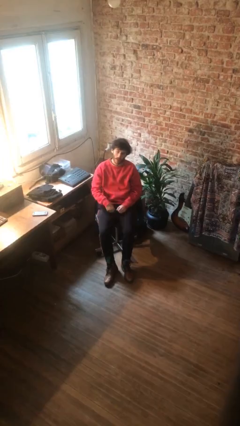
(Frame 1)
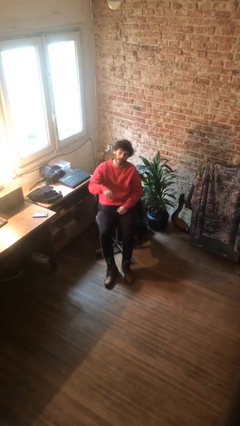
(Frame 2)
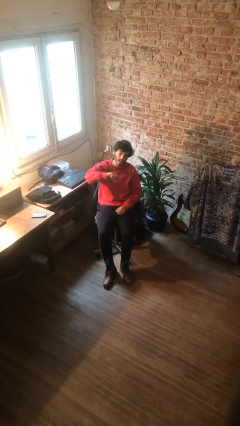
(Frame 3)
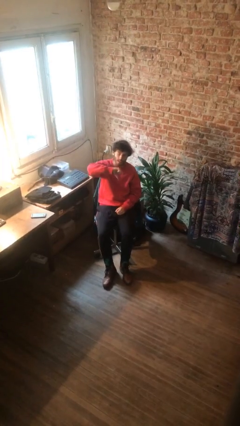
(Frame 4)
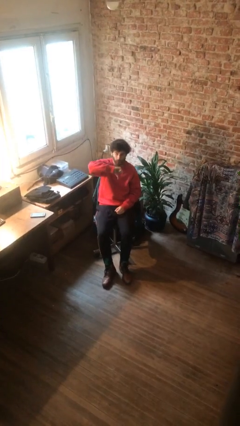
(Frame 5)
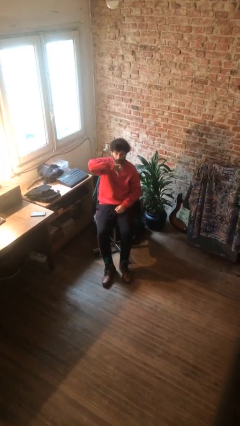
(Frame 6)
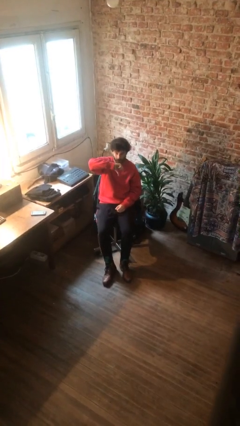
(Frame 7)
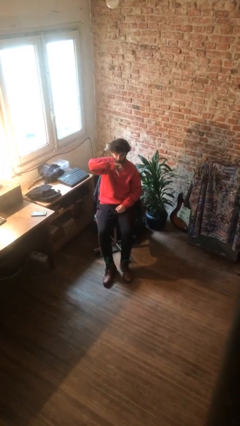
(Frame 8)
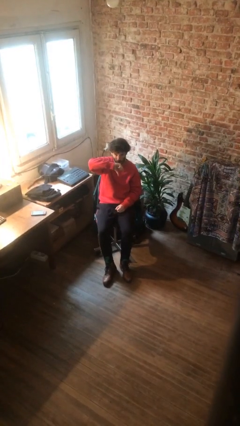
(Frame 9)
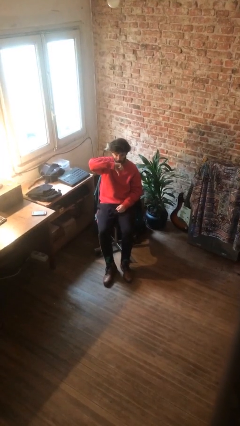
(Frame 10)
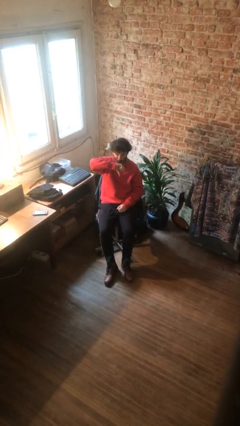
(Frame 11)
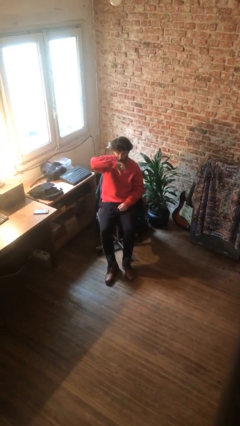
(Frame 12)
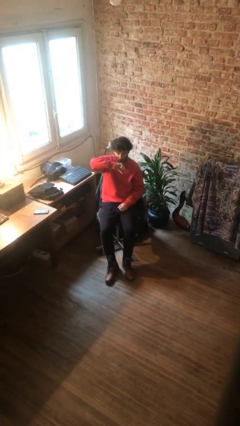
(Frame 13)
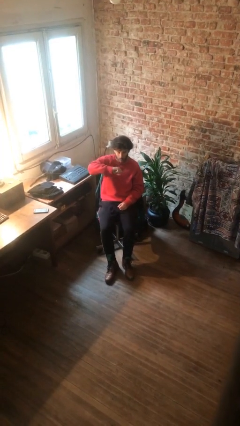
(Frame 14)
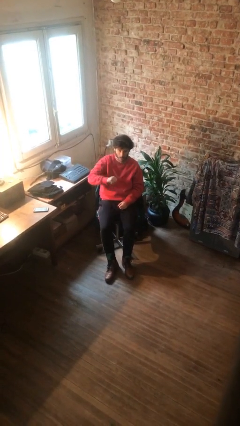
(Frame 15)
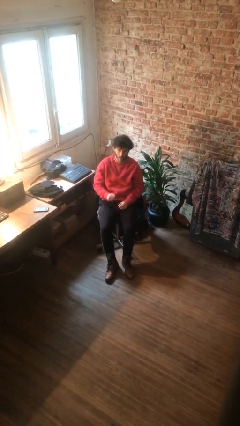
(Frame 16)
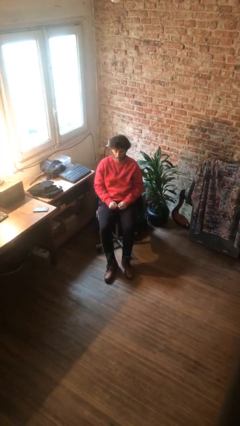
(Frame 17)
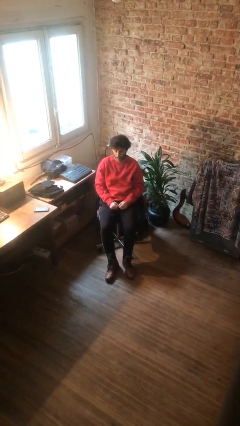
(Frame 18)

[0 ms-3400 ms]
person gestures thumbs down

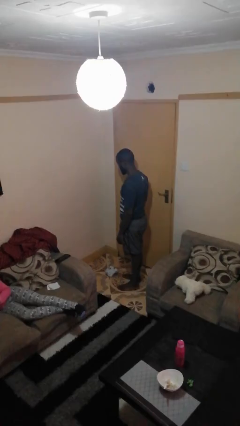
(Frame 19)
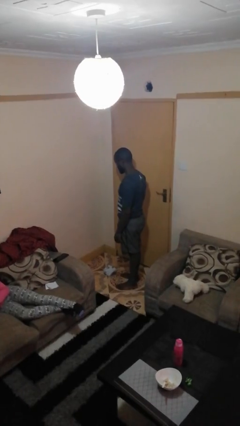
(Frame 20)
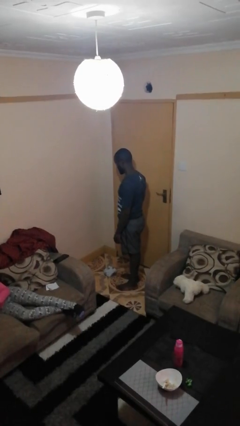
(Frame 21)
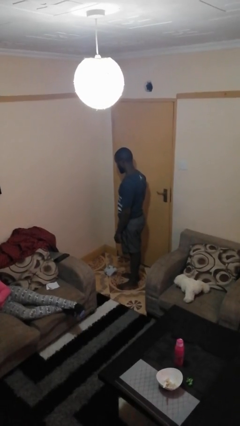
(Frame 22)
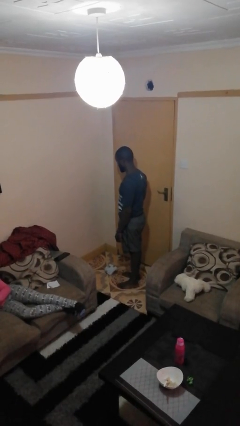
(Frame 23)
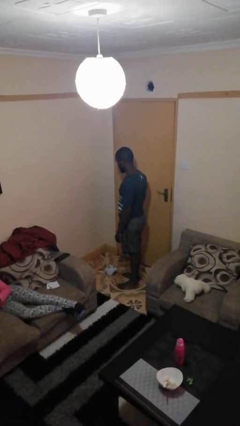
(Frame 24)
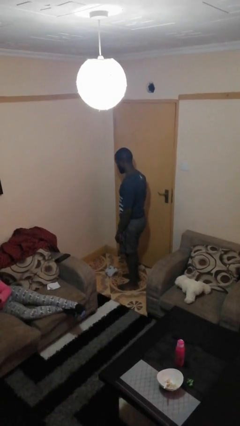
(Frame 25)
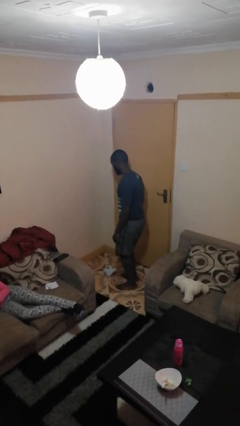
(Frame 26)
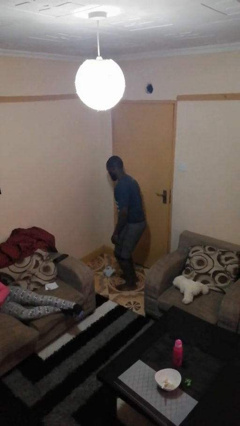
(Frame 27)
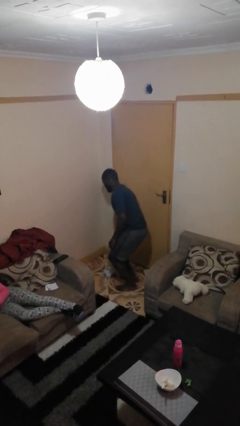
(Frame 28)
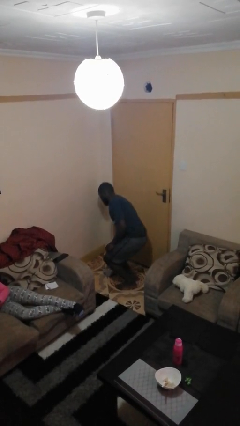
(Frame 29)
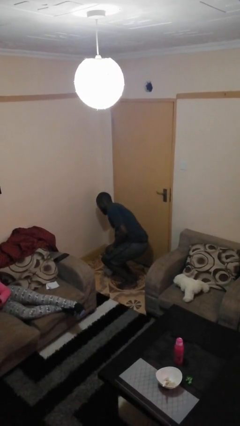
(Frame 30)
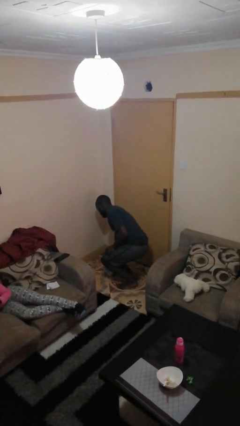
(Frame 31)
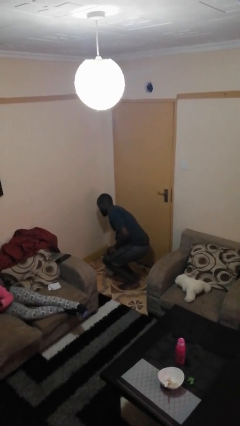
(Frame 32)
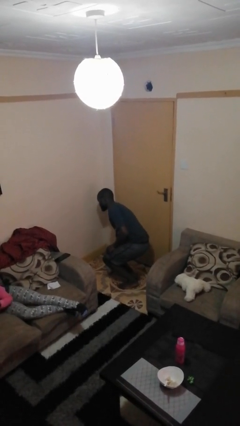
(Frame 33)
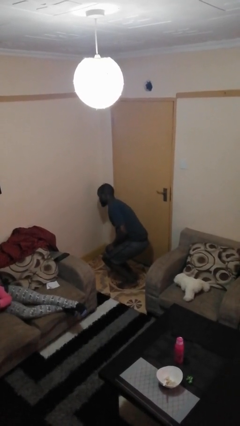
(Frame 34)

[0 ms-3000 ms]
person picks up object from floor

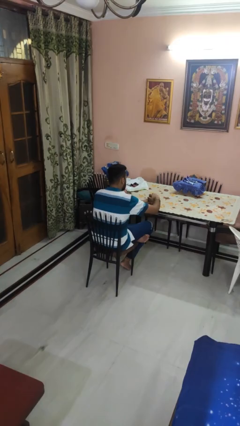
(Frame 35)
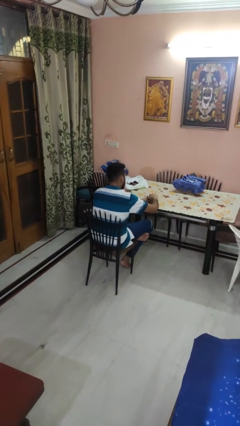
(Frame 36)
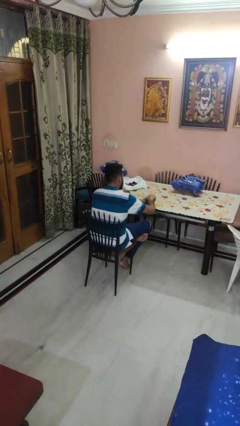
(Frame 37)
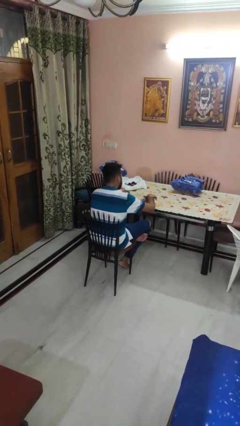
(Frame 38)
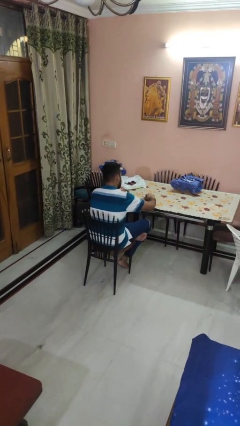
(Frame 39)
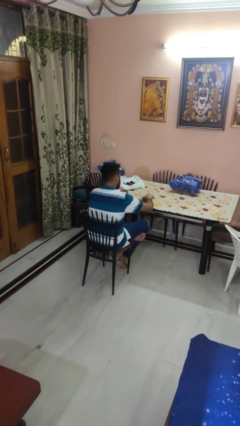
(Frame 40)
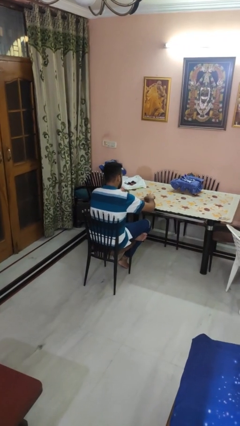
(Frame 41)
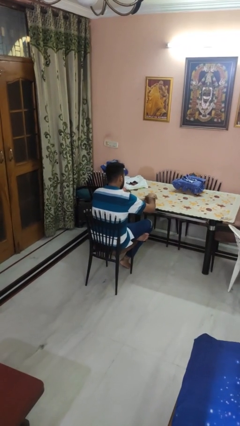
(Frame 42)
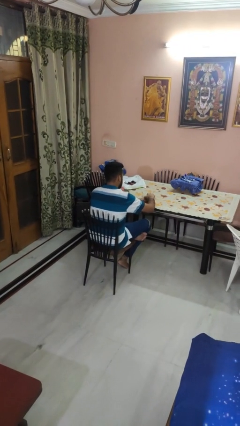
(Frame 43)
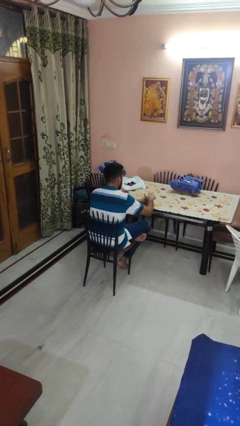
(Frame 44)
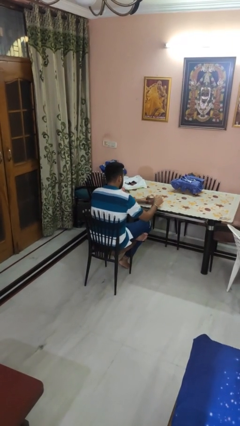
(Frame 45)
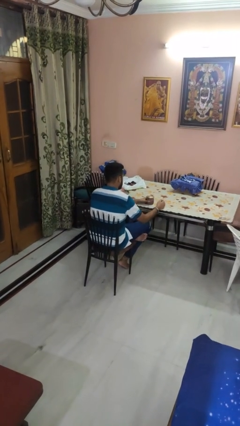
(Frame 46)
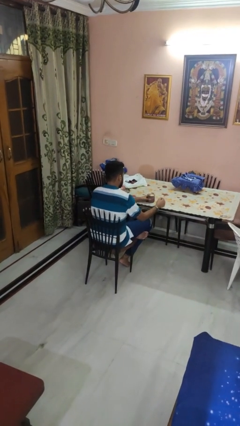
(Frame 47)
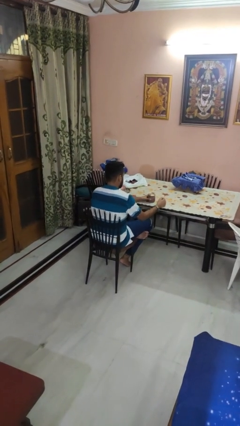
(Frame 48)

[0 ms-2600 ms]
person closes jar

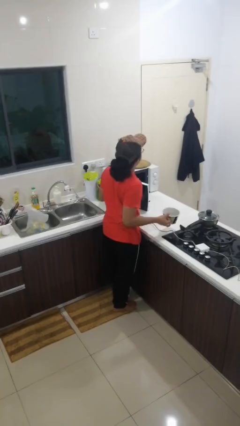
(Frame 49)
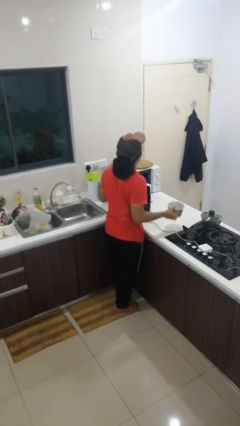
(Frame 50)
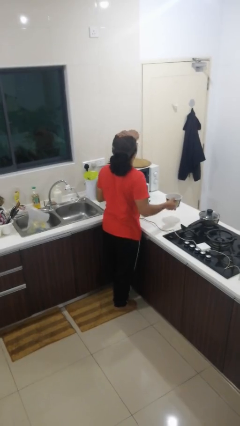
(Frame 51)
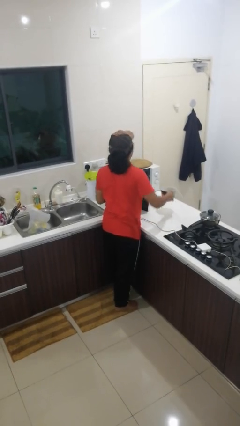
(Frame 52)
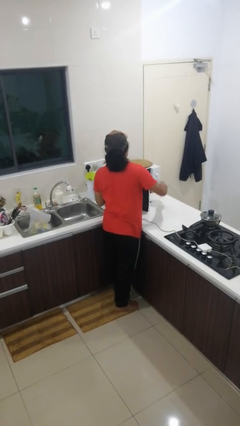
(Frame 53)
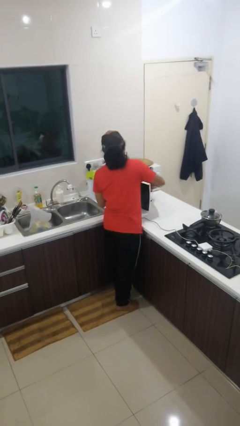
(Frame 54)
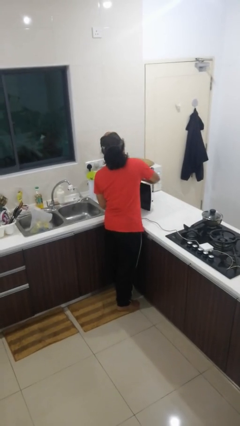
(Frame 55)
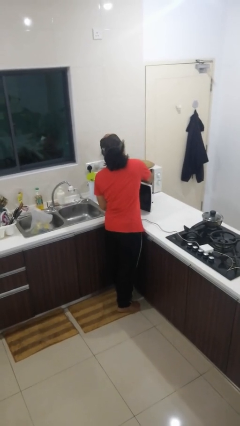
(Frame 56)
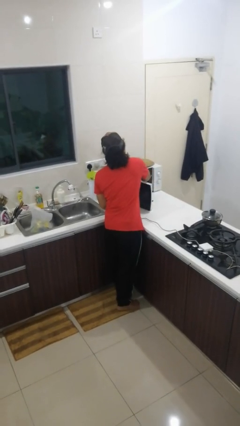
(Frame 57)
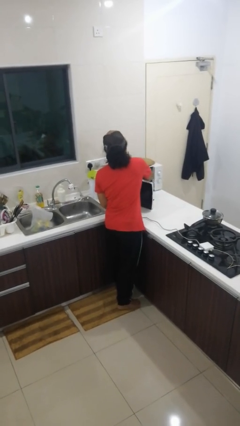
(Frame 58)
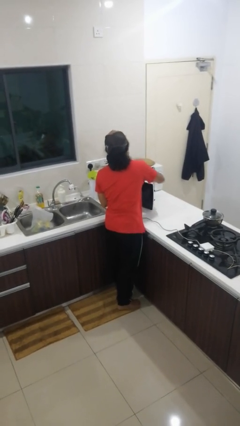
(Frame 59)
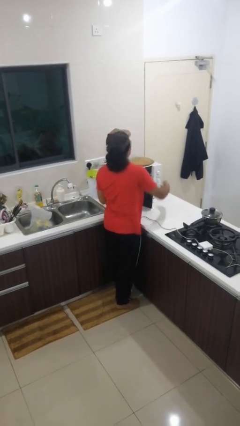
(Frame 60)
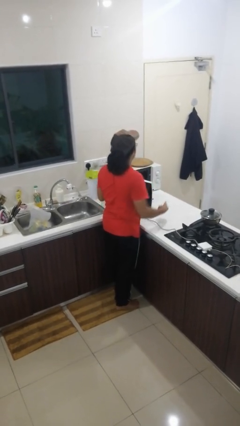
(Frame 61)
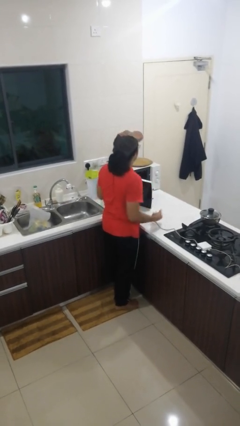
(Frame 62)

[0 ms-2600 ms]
person puts object into microwave

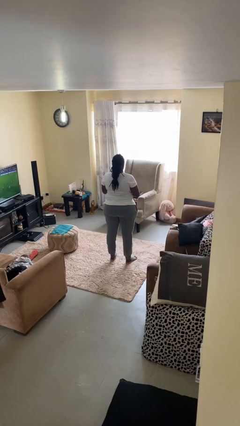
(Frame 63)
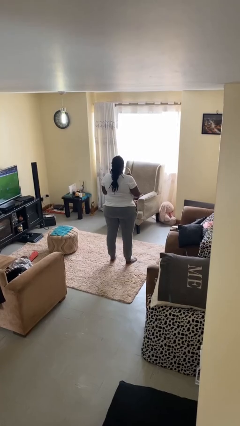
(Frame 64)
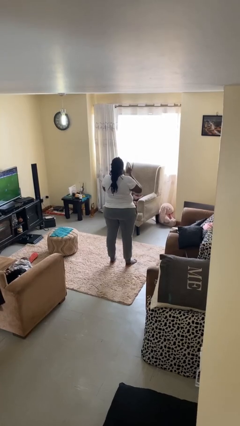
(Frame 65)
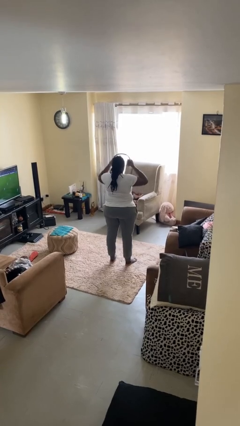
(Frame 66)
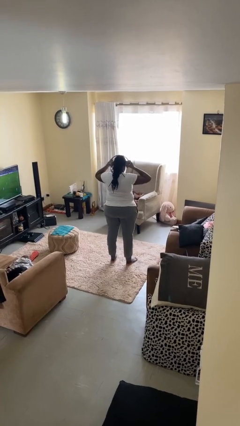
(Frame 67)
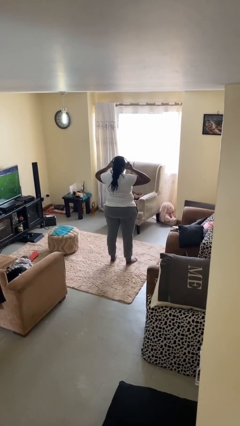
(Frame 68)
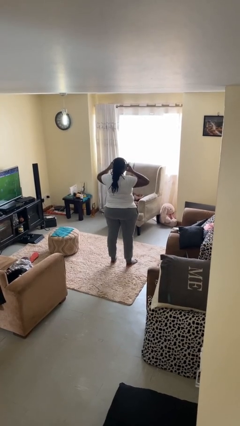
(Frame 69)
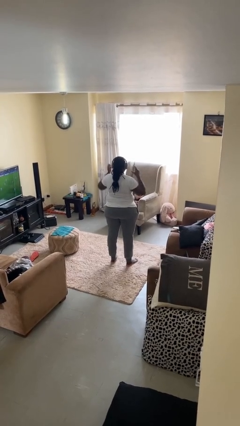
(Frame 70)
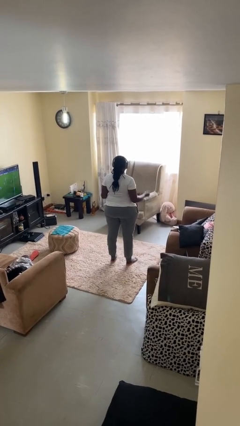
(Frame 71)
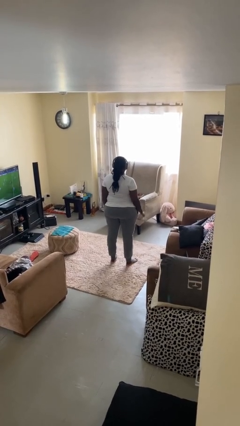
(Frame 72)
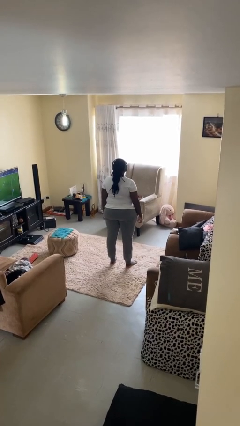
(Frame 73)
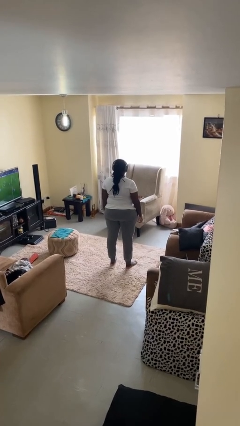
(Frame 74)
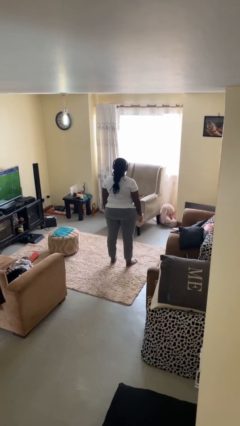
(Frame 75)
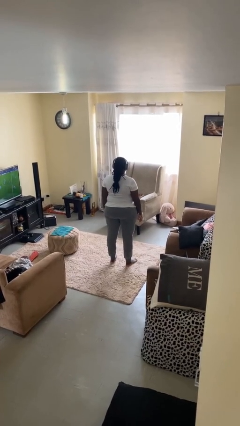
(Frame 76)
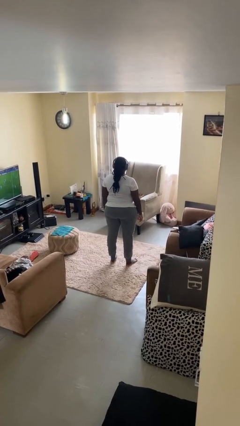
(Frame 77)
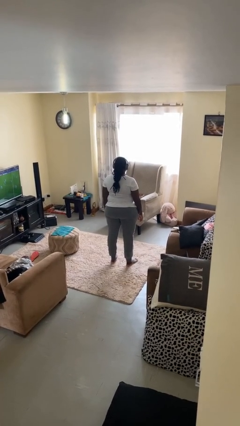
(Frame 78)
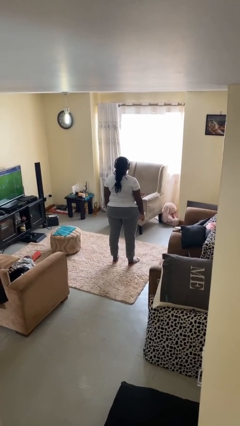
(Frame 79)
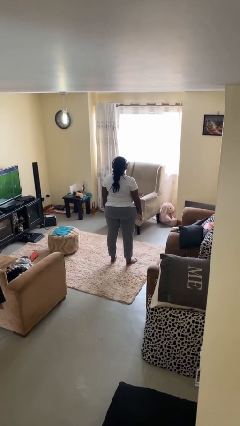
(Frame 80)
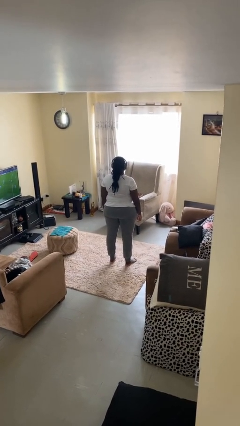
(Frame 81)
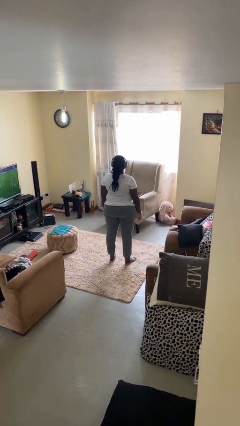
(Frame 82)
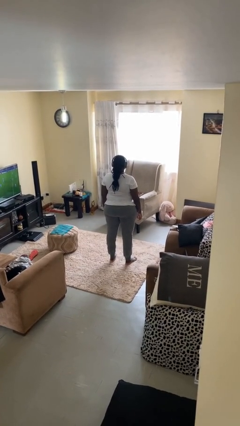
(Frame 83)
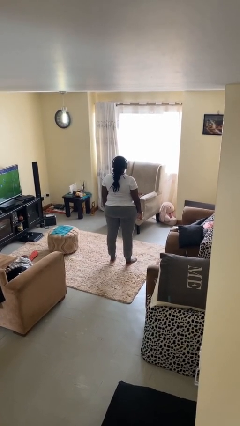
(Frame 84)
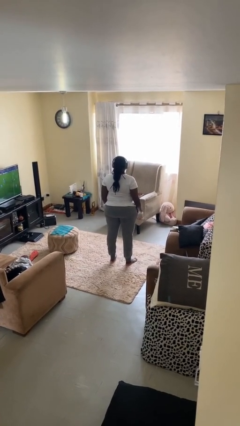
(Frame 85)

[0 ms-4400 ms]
person puts on headphones

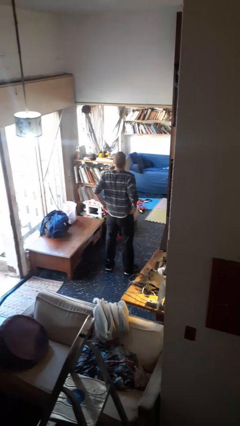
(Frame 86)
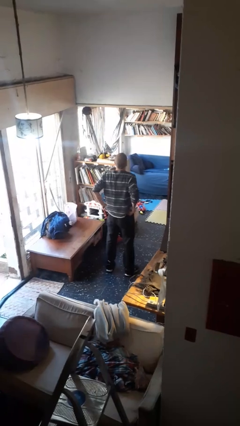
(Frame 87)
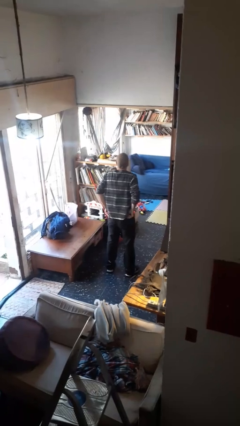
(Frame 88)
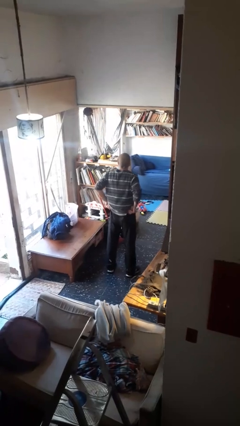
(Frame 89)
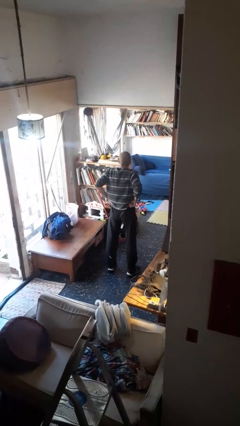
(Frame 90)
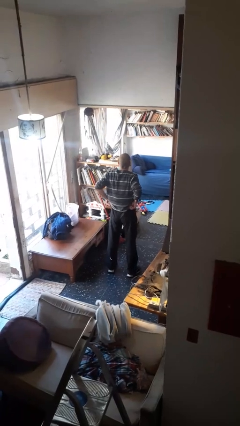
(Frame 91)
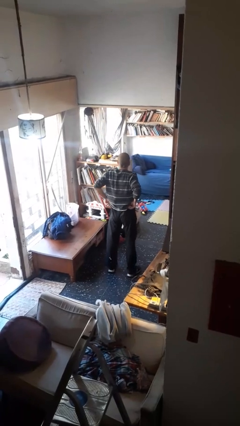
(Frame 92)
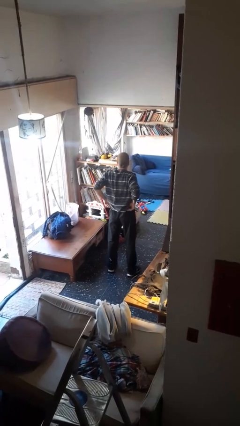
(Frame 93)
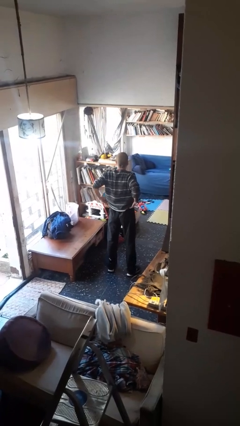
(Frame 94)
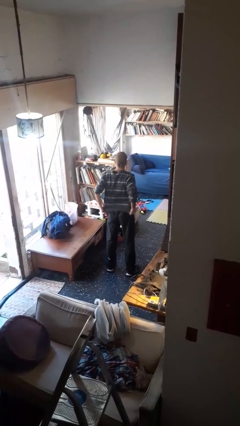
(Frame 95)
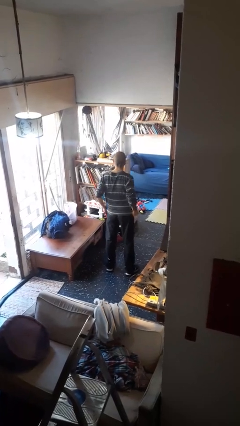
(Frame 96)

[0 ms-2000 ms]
person hikes up pants
